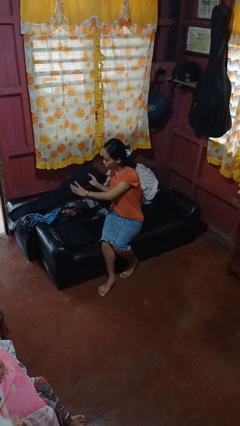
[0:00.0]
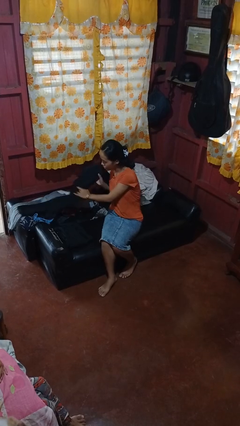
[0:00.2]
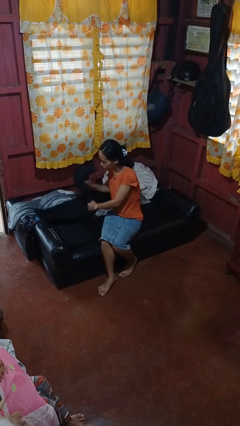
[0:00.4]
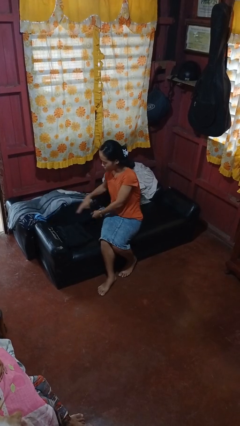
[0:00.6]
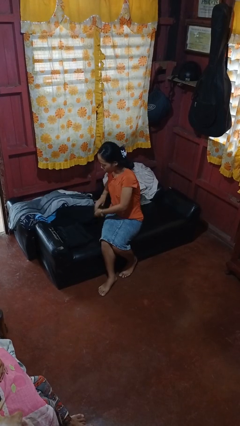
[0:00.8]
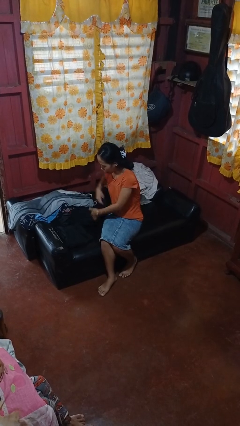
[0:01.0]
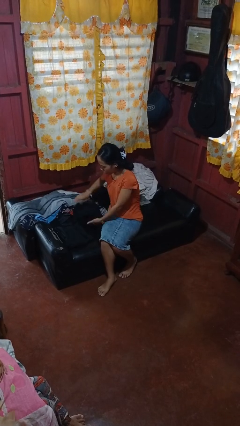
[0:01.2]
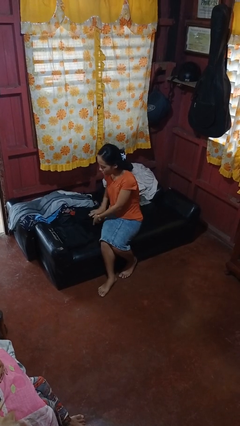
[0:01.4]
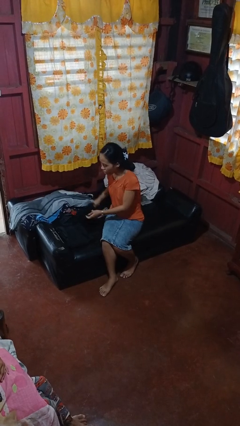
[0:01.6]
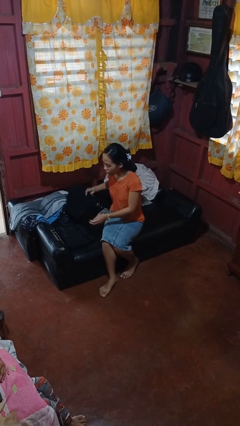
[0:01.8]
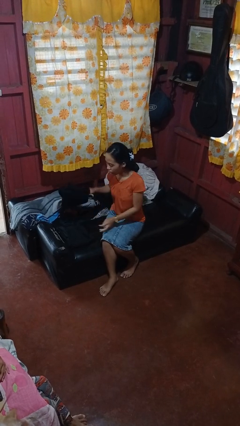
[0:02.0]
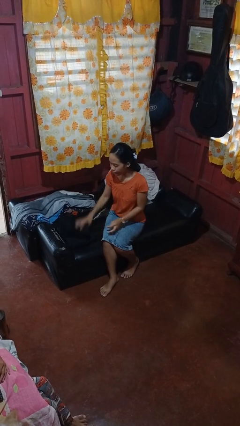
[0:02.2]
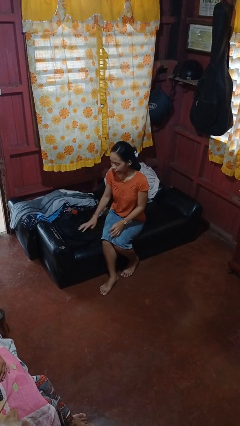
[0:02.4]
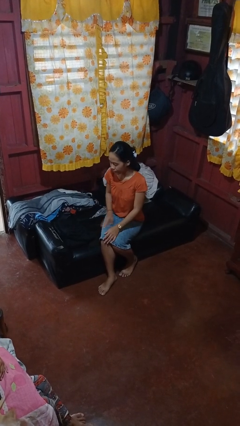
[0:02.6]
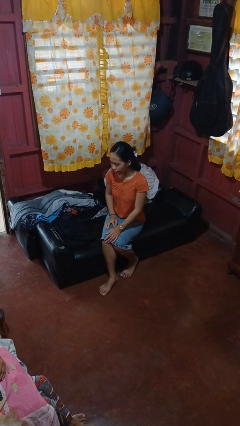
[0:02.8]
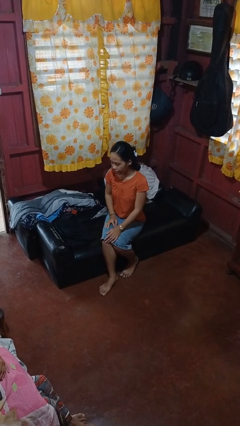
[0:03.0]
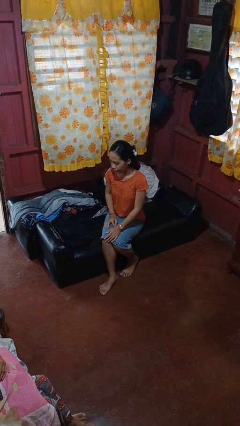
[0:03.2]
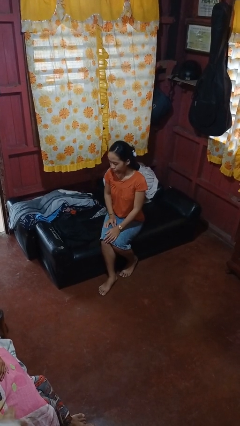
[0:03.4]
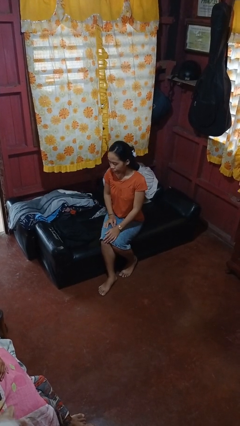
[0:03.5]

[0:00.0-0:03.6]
person folds pants

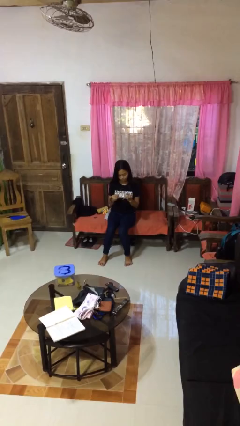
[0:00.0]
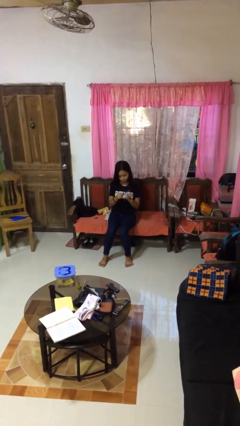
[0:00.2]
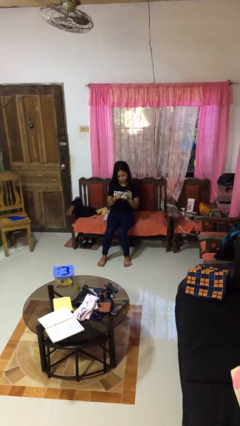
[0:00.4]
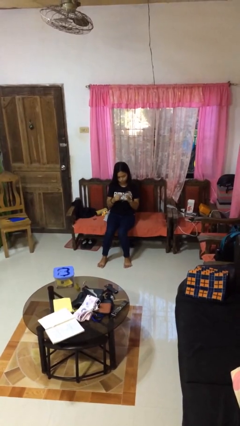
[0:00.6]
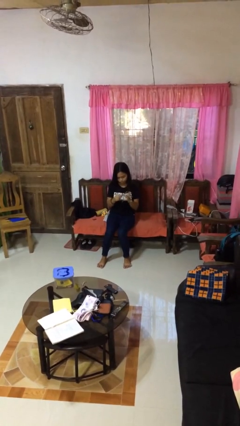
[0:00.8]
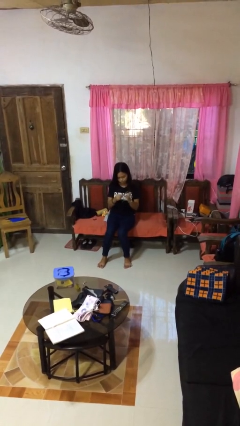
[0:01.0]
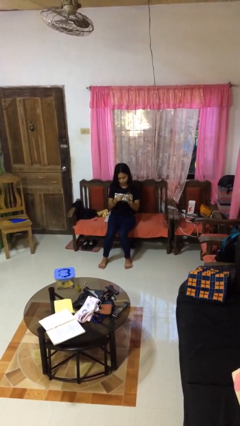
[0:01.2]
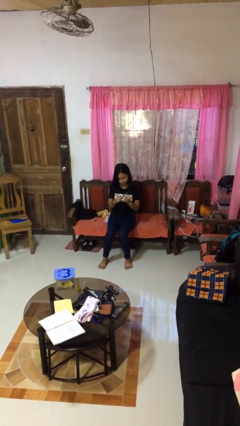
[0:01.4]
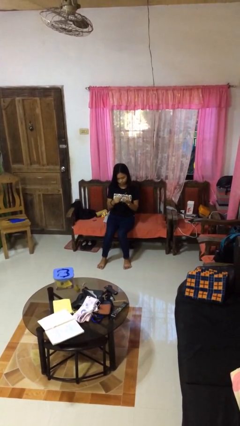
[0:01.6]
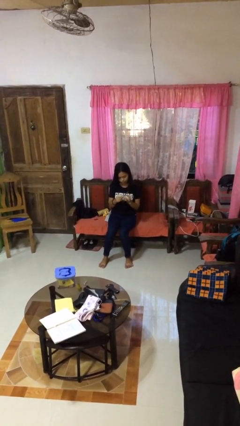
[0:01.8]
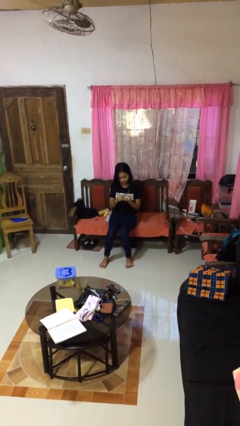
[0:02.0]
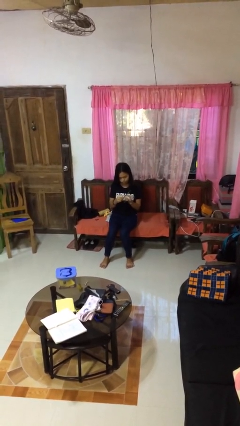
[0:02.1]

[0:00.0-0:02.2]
person files fingernails

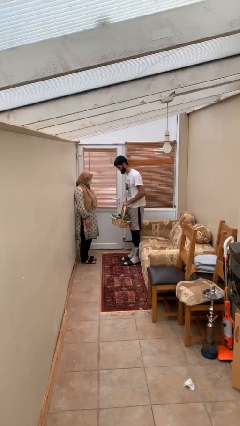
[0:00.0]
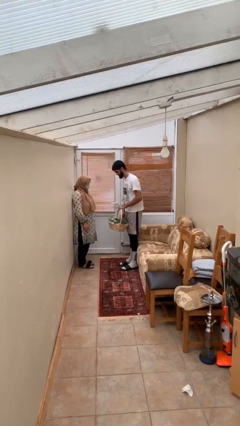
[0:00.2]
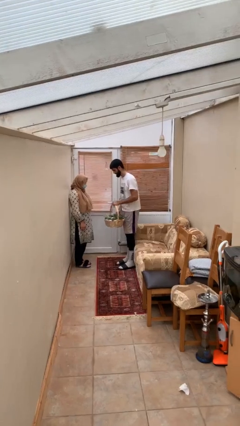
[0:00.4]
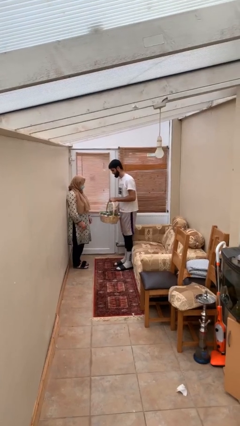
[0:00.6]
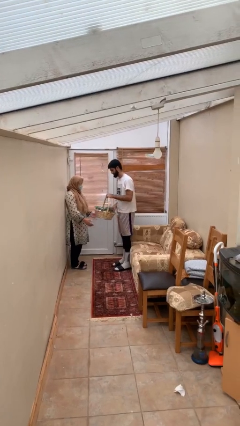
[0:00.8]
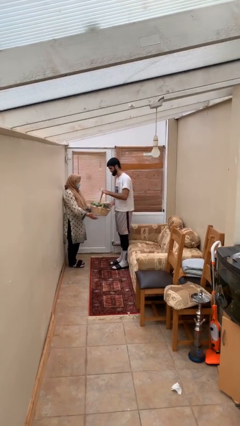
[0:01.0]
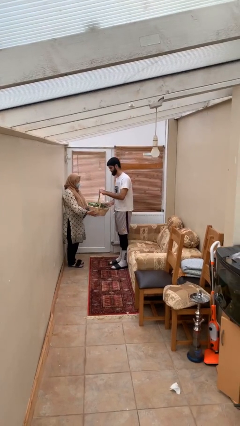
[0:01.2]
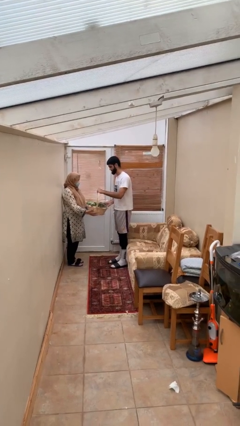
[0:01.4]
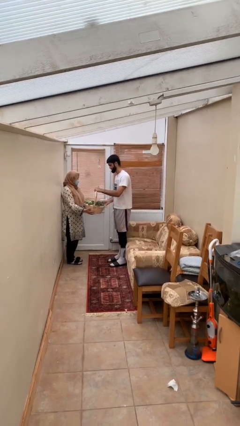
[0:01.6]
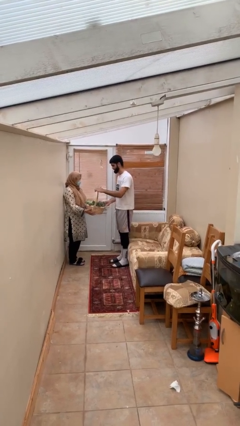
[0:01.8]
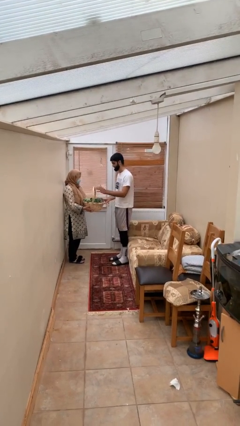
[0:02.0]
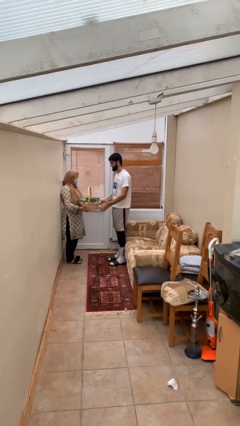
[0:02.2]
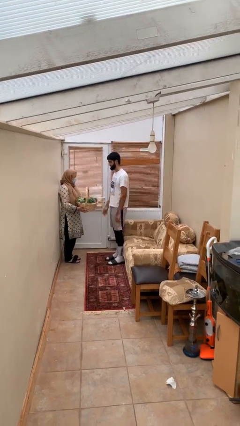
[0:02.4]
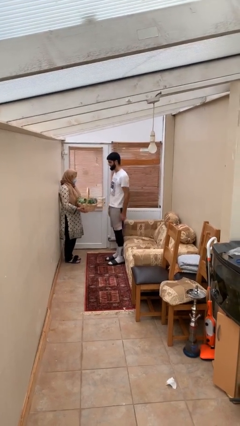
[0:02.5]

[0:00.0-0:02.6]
person transfers object to person

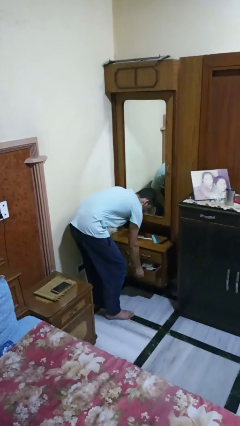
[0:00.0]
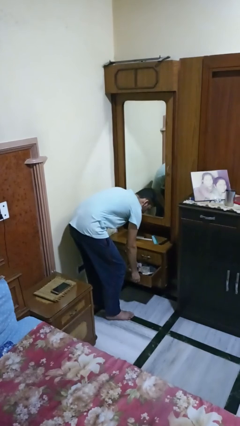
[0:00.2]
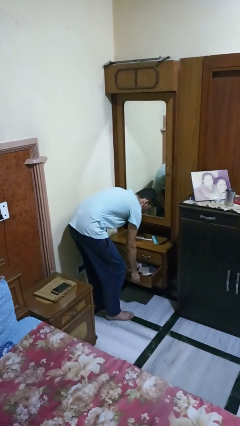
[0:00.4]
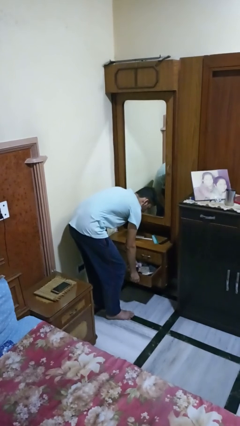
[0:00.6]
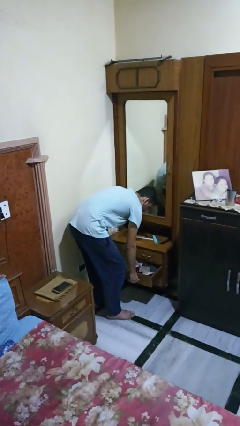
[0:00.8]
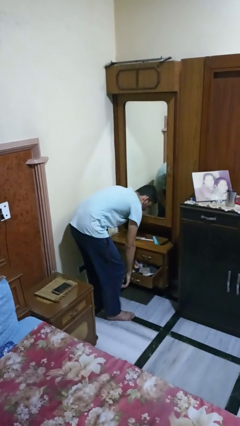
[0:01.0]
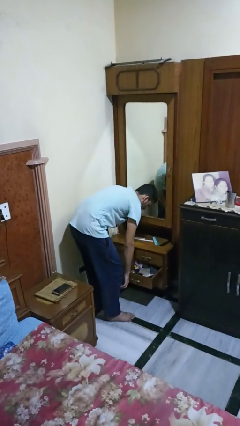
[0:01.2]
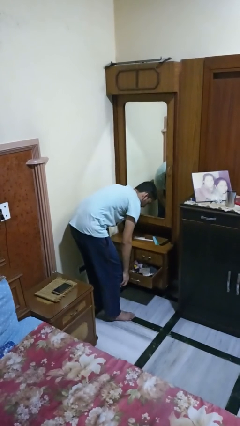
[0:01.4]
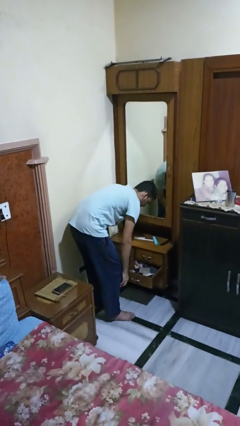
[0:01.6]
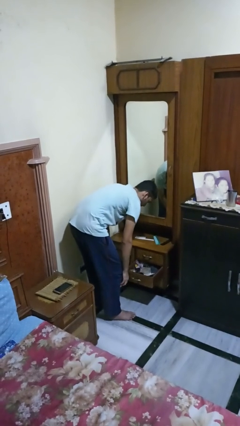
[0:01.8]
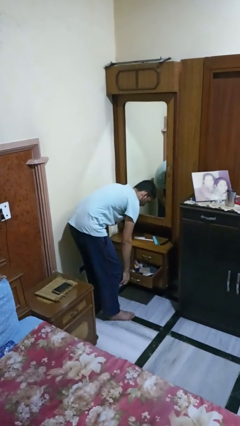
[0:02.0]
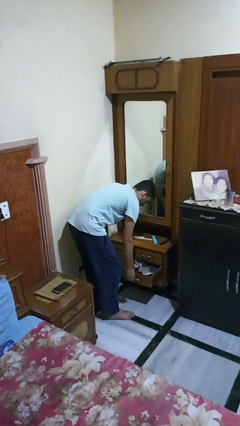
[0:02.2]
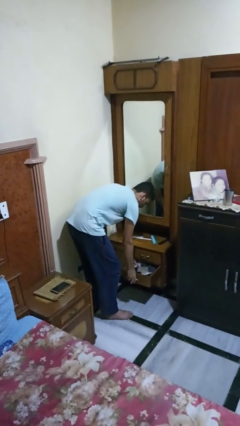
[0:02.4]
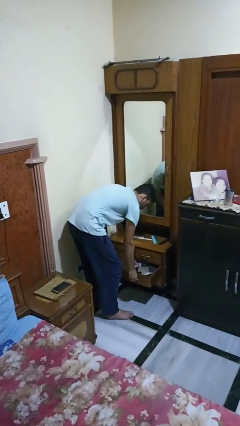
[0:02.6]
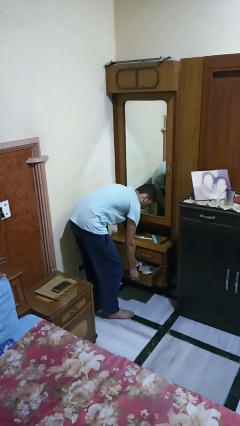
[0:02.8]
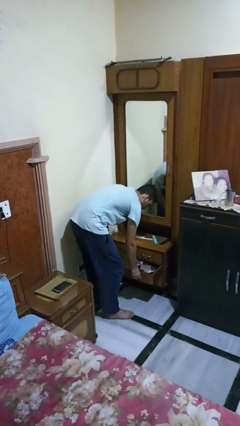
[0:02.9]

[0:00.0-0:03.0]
person opens dresser drawer

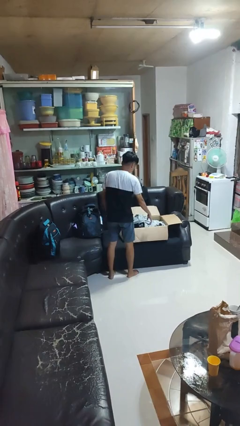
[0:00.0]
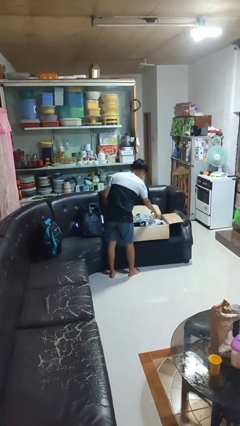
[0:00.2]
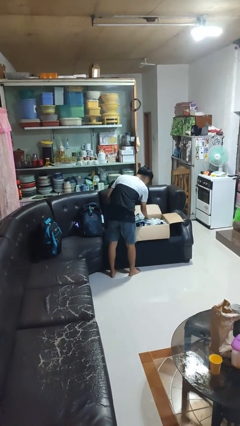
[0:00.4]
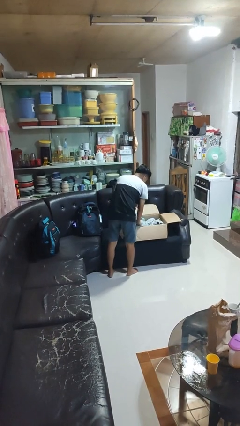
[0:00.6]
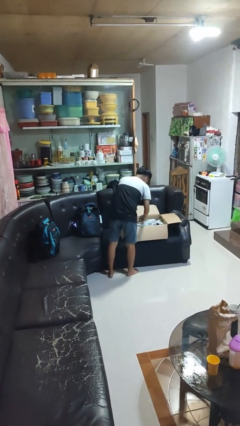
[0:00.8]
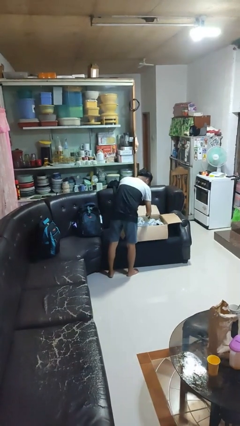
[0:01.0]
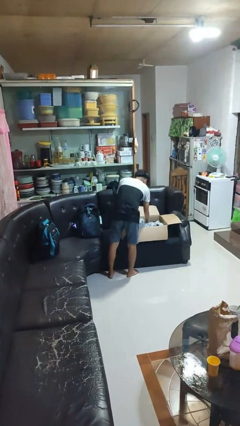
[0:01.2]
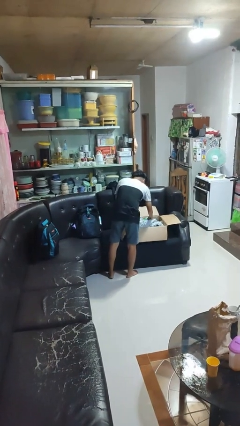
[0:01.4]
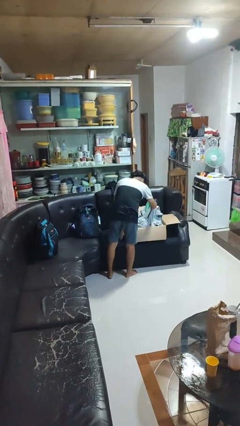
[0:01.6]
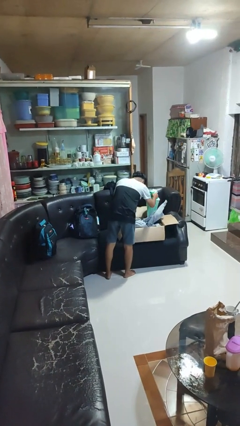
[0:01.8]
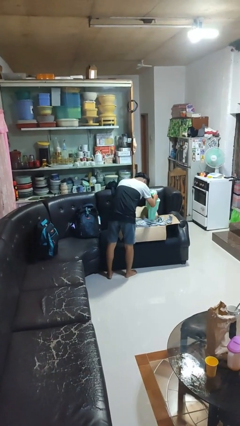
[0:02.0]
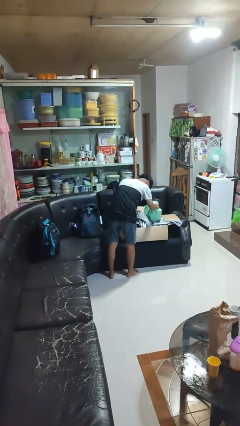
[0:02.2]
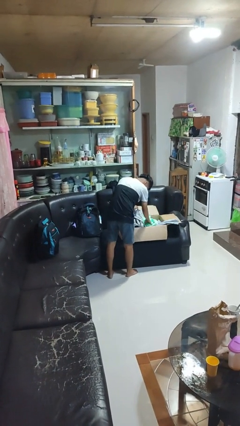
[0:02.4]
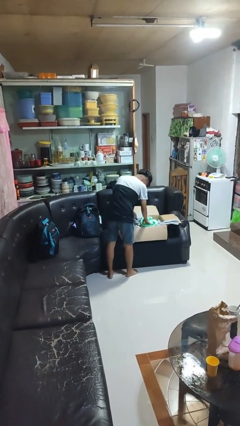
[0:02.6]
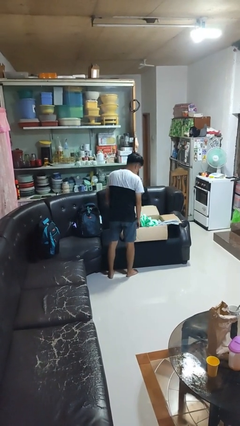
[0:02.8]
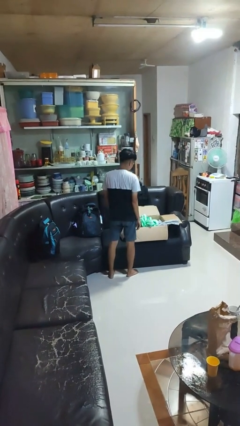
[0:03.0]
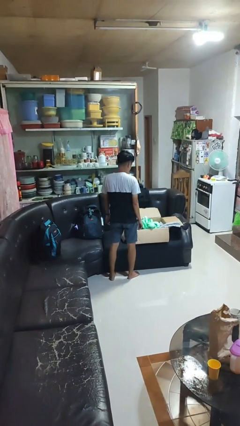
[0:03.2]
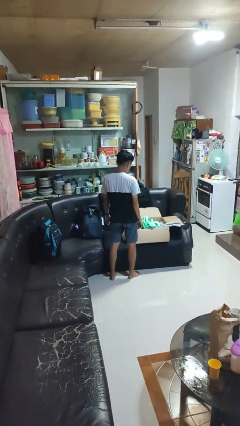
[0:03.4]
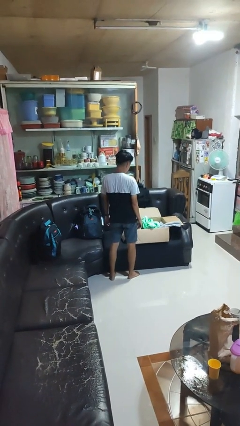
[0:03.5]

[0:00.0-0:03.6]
person searches in box

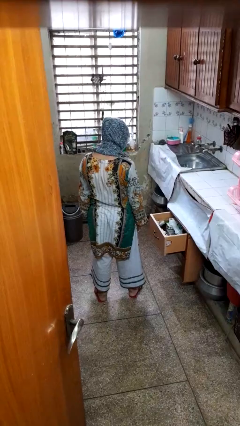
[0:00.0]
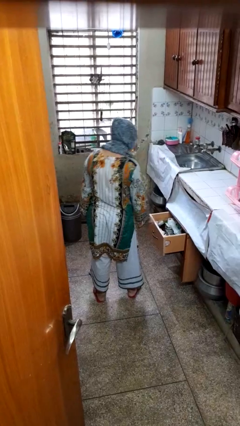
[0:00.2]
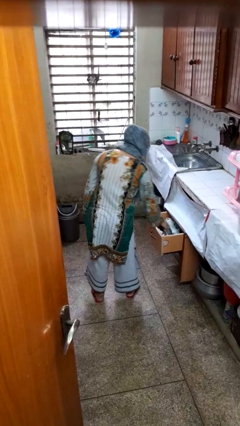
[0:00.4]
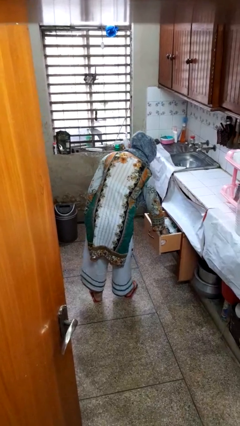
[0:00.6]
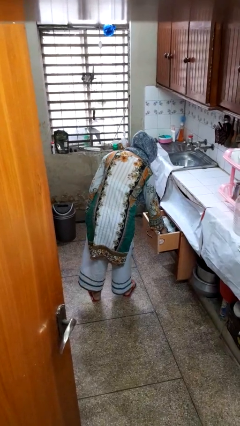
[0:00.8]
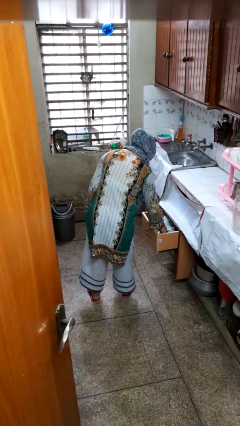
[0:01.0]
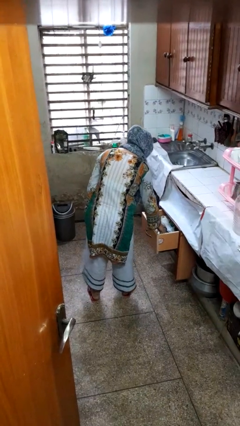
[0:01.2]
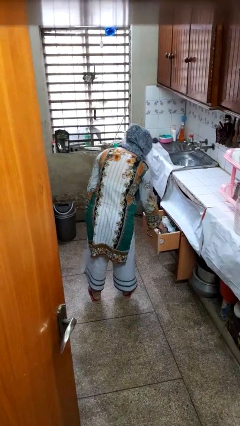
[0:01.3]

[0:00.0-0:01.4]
person searches in kitchen drawer

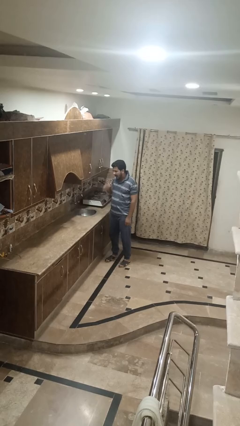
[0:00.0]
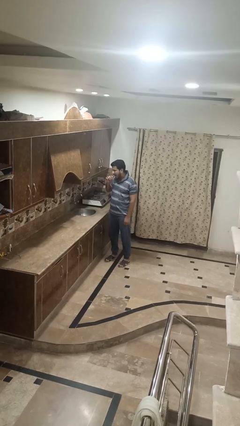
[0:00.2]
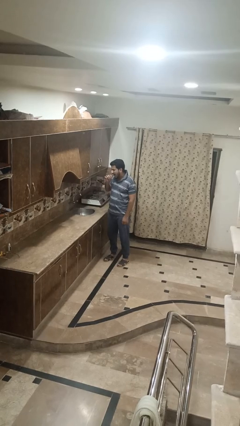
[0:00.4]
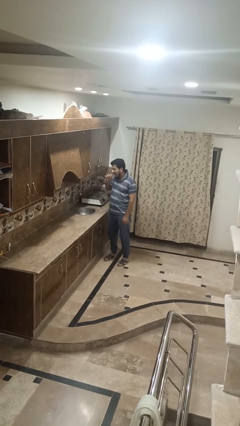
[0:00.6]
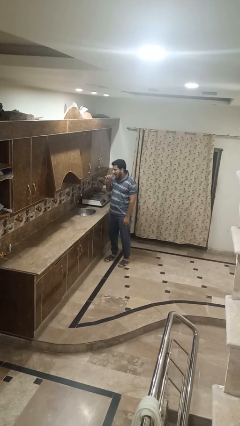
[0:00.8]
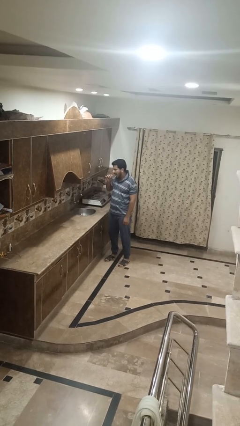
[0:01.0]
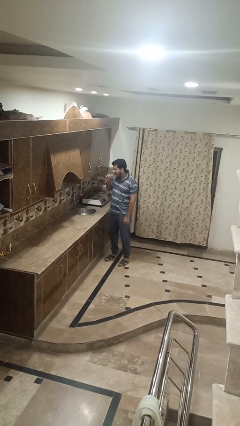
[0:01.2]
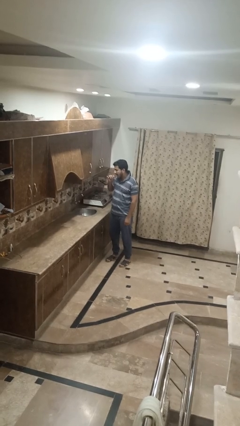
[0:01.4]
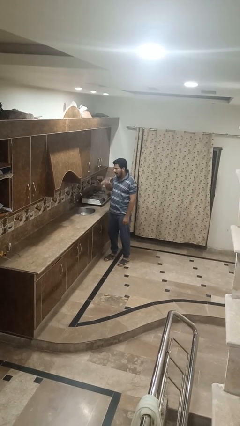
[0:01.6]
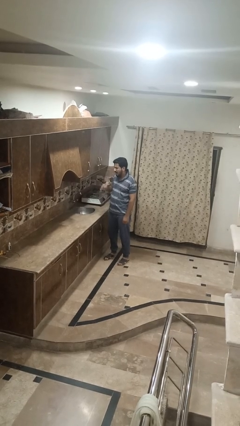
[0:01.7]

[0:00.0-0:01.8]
person brushes teeth
